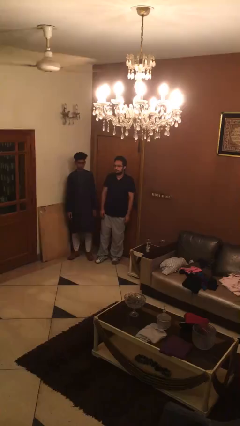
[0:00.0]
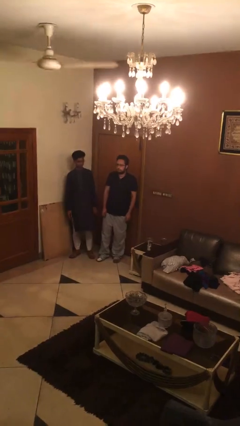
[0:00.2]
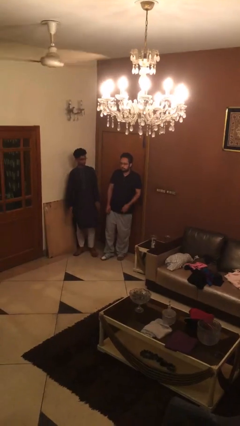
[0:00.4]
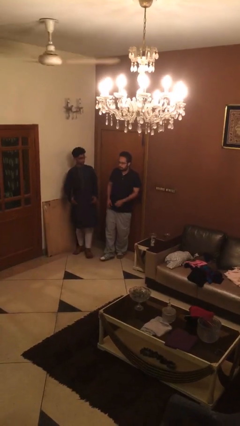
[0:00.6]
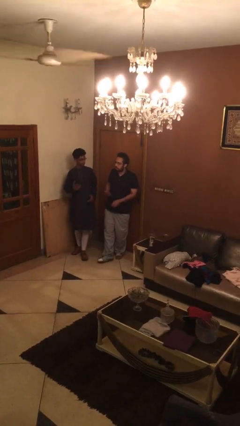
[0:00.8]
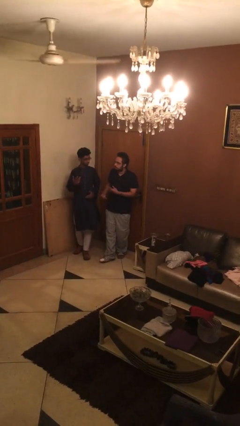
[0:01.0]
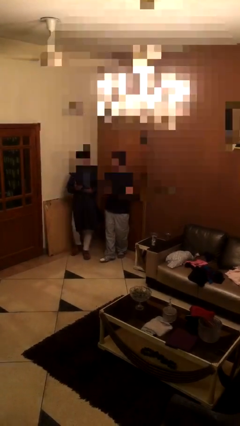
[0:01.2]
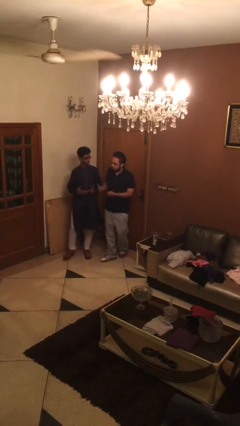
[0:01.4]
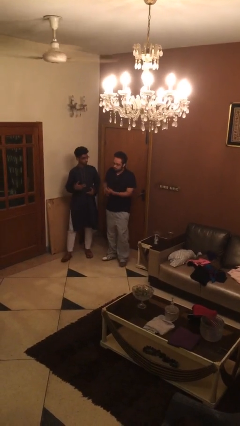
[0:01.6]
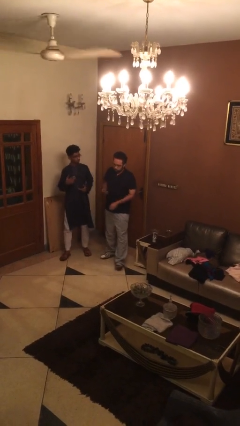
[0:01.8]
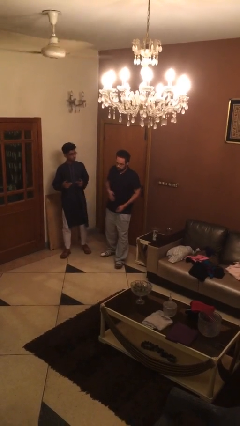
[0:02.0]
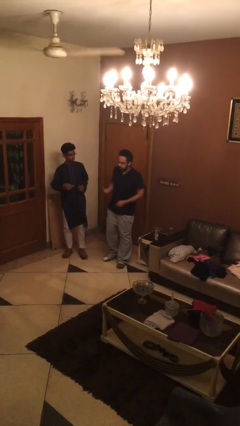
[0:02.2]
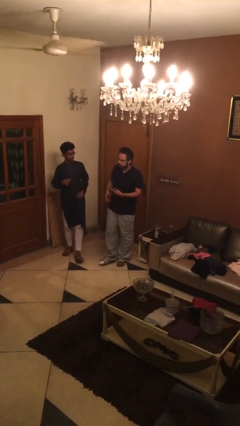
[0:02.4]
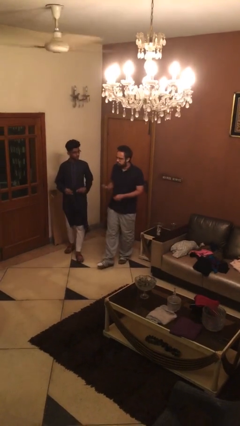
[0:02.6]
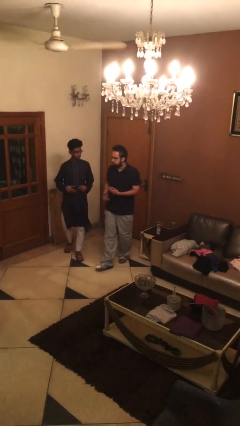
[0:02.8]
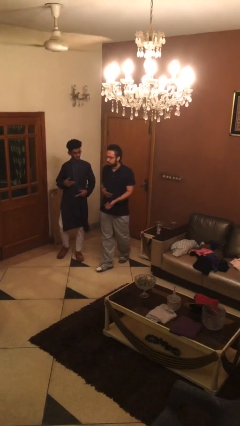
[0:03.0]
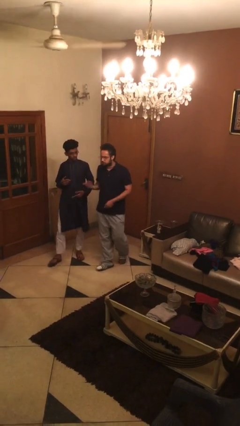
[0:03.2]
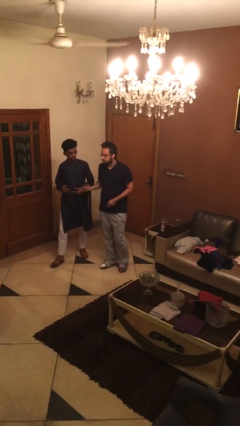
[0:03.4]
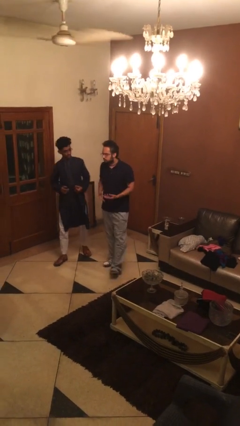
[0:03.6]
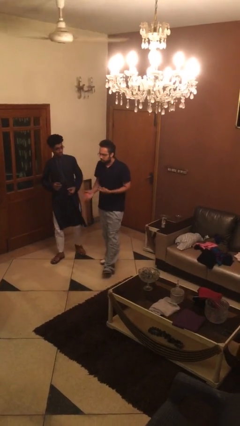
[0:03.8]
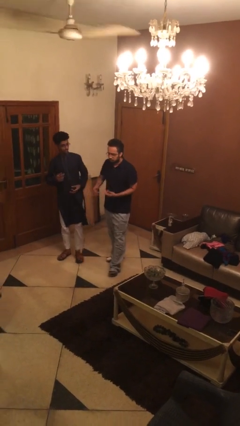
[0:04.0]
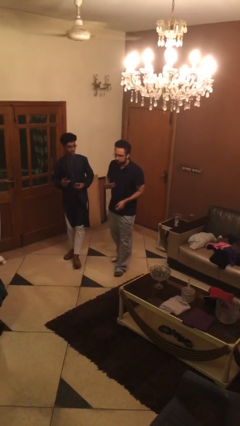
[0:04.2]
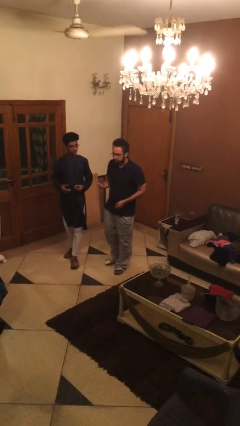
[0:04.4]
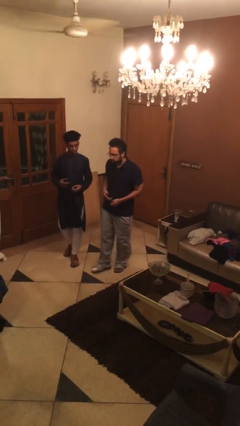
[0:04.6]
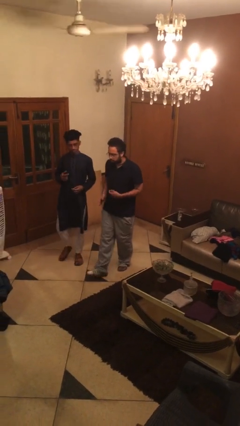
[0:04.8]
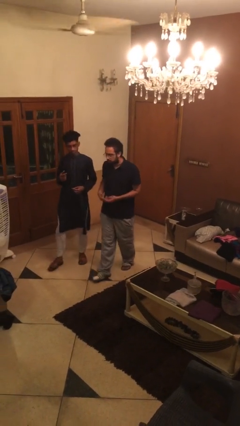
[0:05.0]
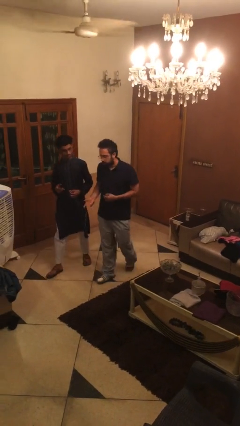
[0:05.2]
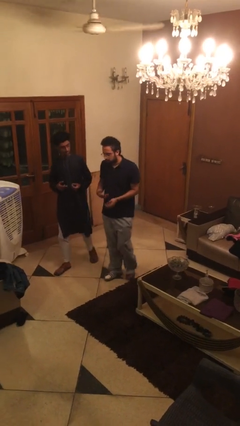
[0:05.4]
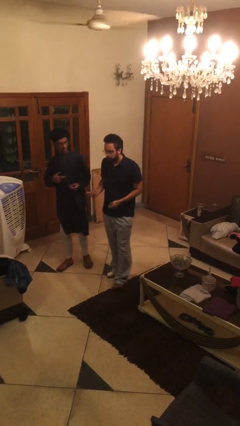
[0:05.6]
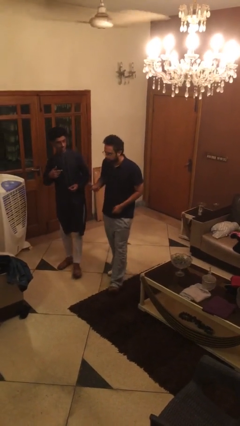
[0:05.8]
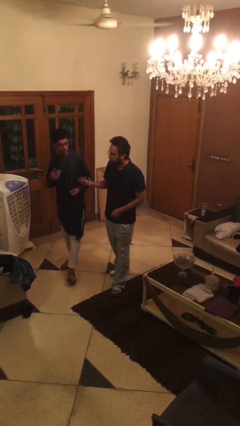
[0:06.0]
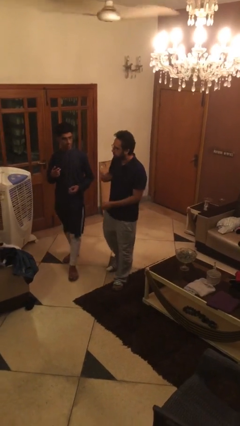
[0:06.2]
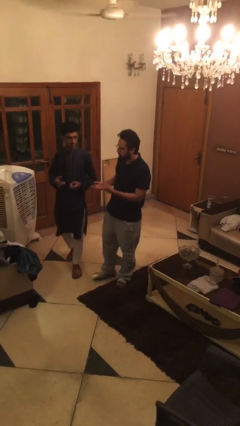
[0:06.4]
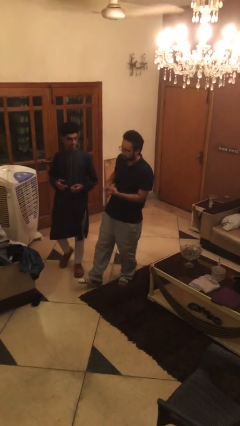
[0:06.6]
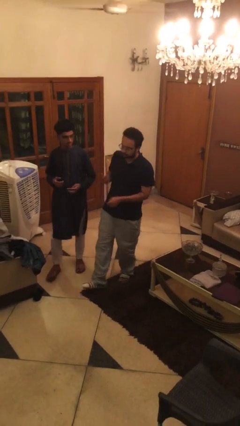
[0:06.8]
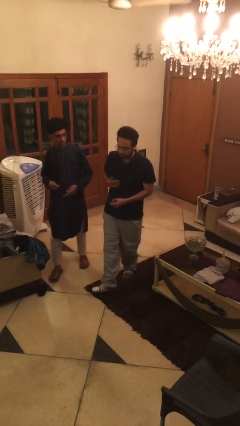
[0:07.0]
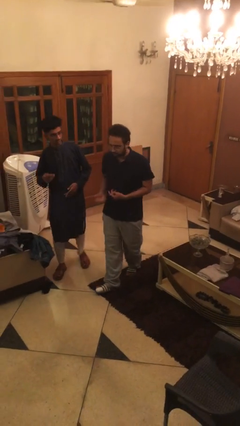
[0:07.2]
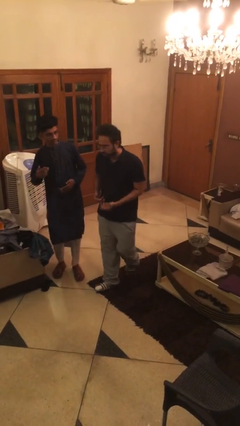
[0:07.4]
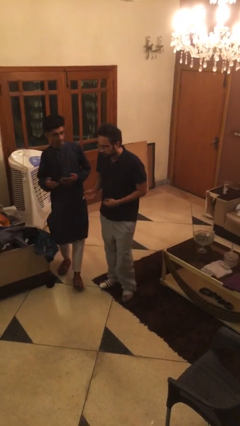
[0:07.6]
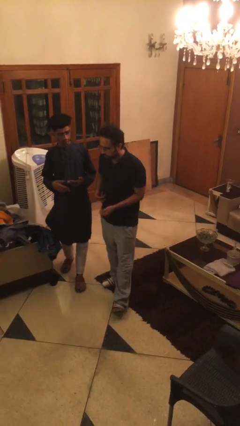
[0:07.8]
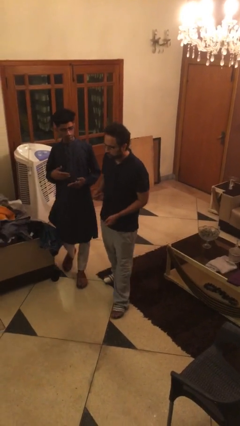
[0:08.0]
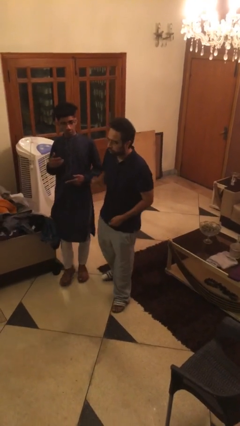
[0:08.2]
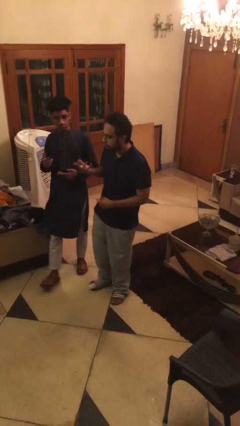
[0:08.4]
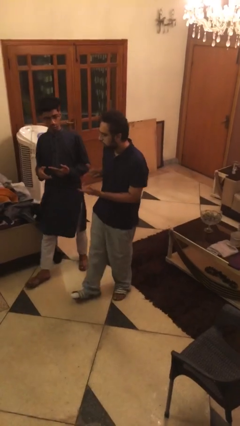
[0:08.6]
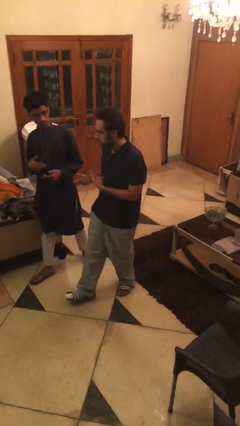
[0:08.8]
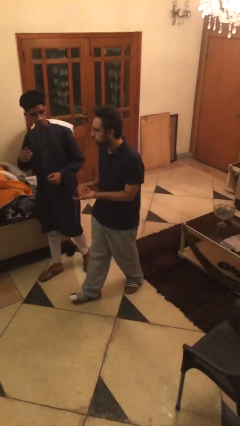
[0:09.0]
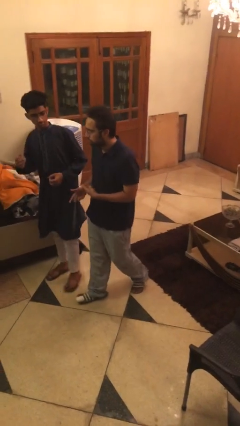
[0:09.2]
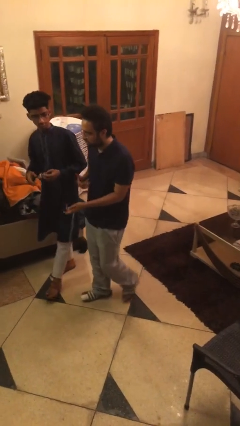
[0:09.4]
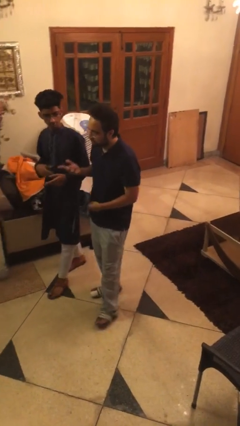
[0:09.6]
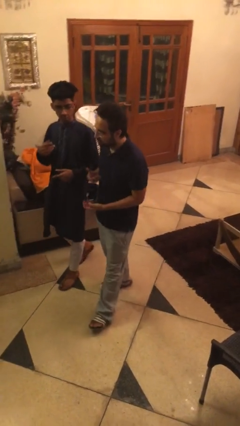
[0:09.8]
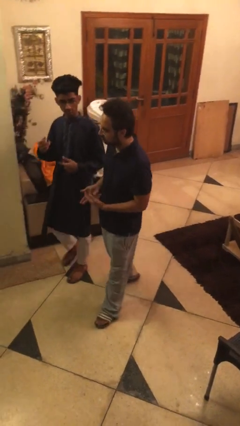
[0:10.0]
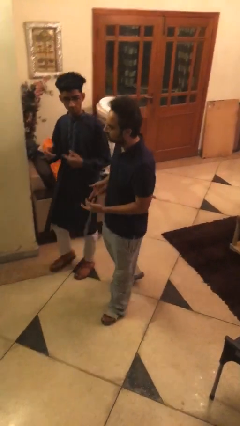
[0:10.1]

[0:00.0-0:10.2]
person talks to person

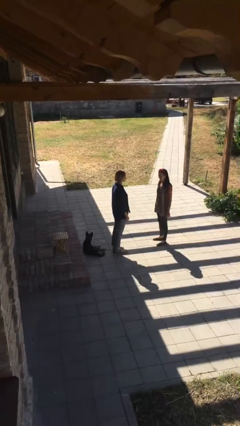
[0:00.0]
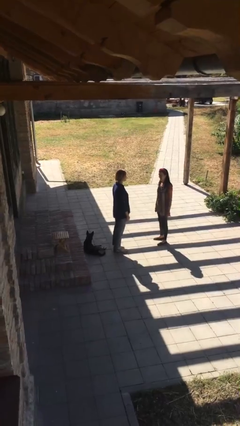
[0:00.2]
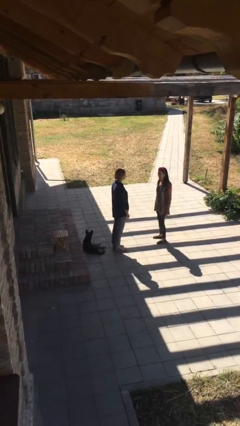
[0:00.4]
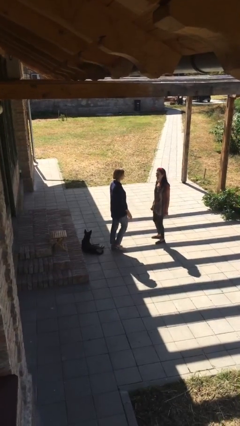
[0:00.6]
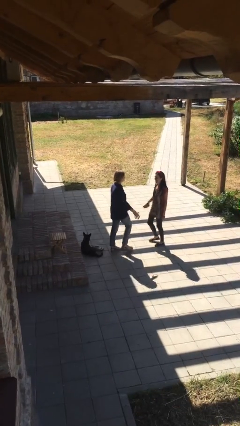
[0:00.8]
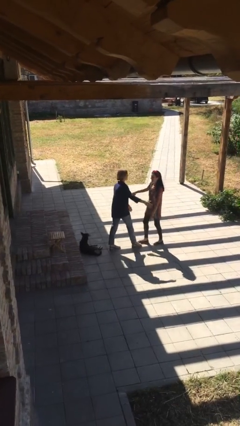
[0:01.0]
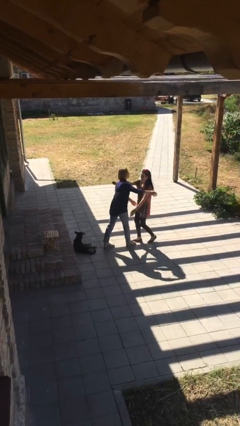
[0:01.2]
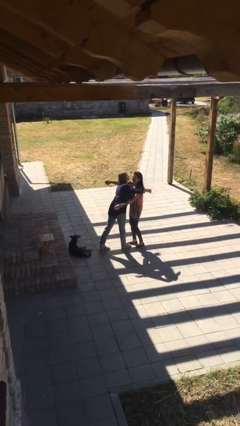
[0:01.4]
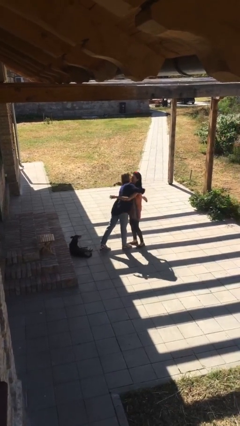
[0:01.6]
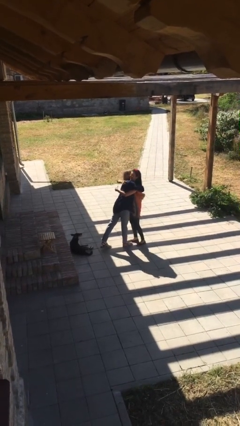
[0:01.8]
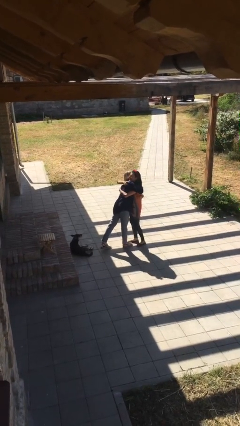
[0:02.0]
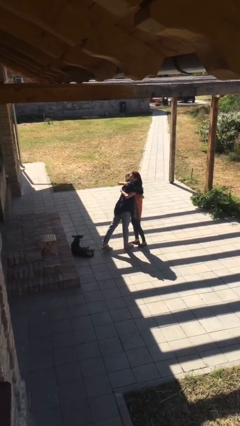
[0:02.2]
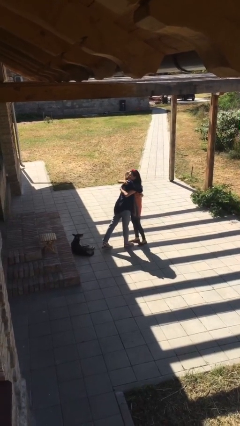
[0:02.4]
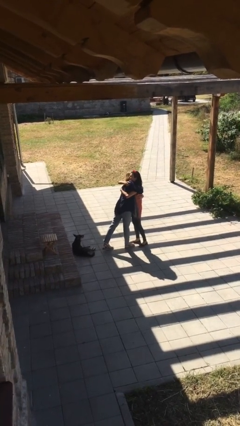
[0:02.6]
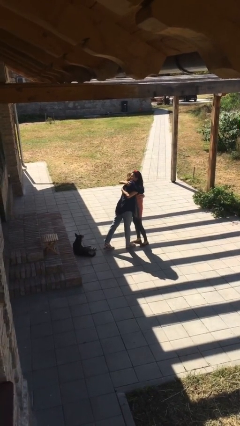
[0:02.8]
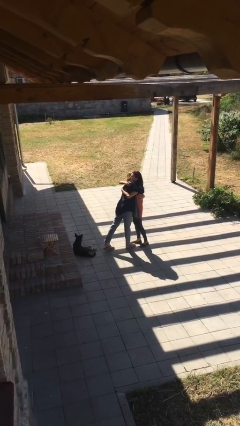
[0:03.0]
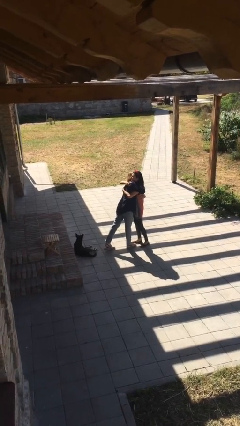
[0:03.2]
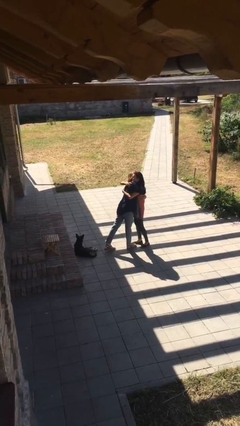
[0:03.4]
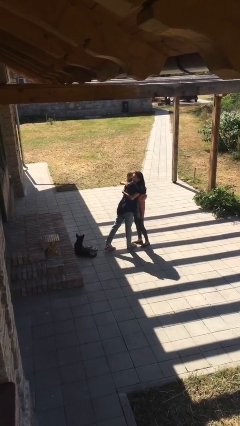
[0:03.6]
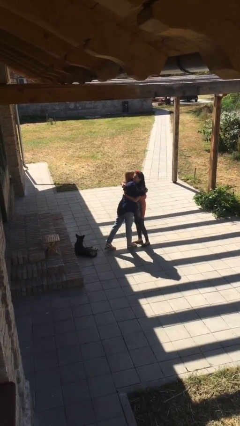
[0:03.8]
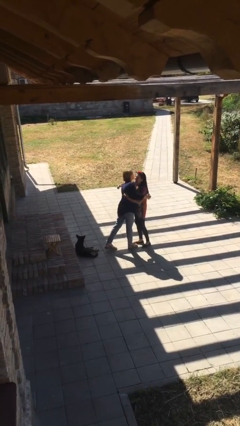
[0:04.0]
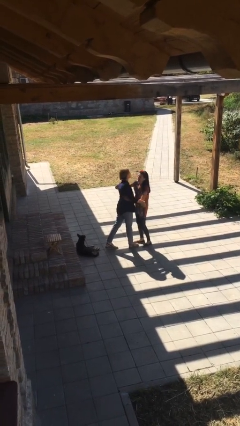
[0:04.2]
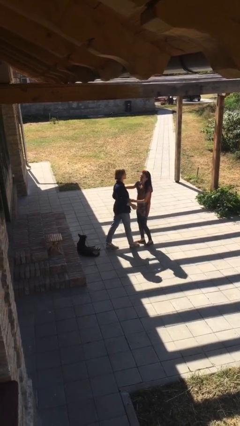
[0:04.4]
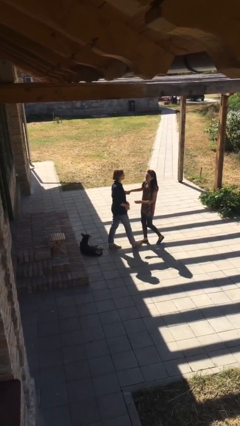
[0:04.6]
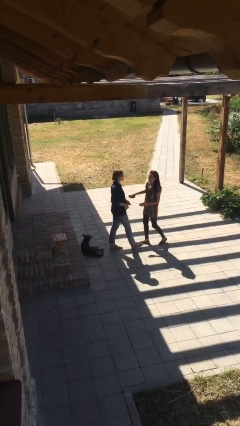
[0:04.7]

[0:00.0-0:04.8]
person embraces person

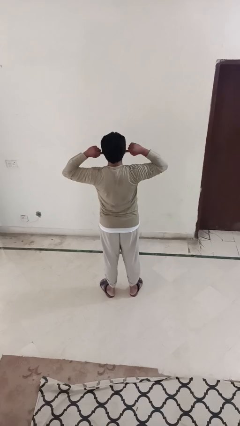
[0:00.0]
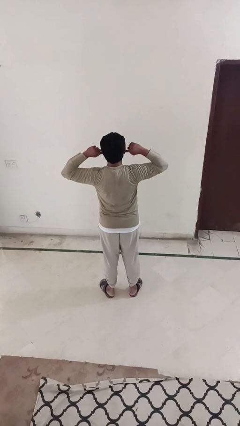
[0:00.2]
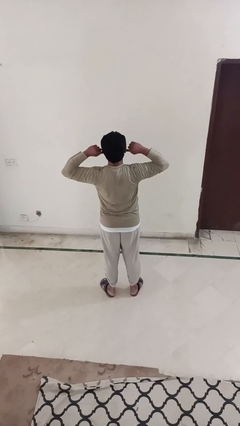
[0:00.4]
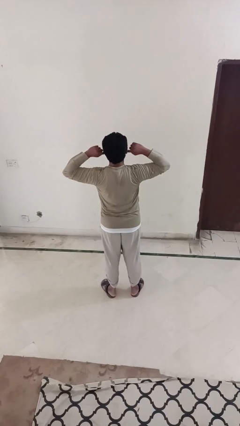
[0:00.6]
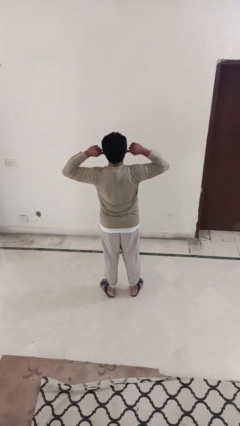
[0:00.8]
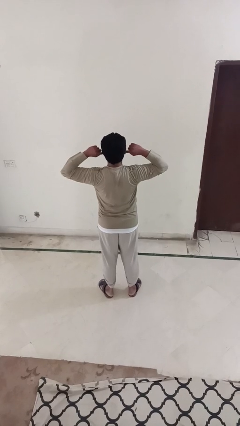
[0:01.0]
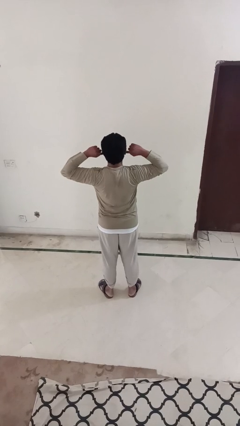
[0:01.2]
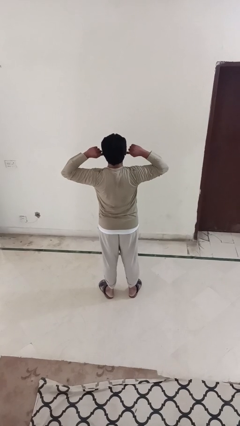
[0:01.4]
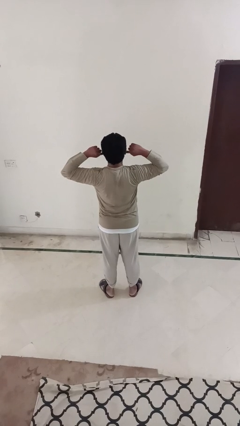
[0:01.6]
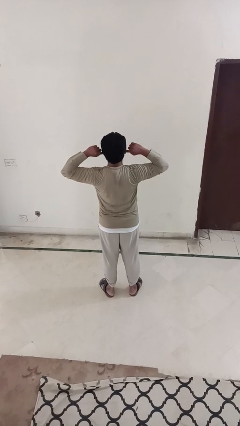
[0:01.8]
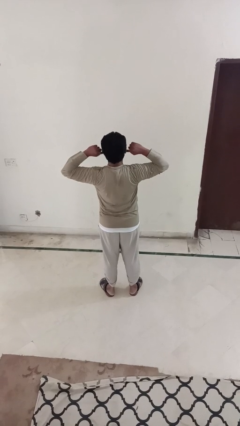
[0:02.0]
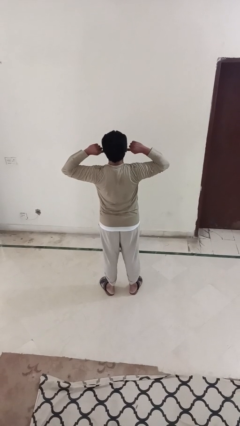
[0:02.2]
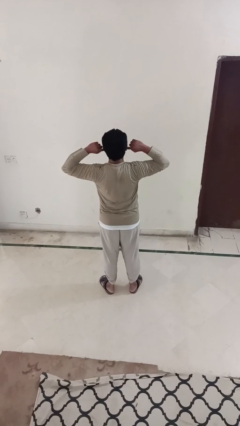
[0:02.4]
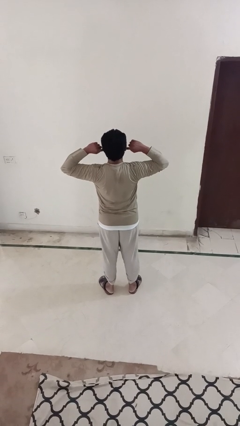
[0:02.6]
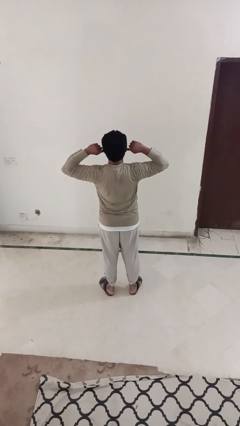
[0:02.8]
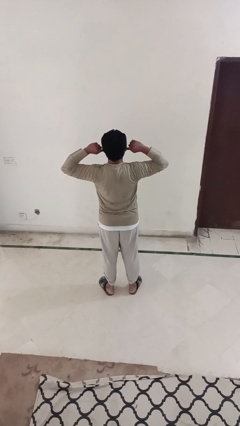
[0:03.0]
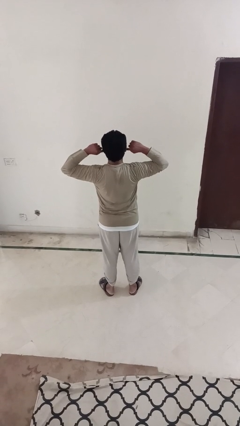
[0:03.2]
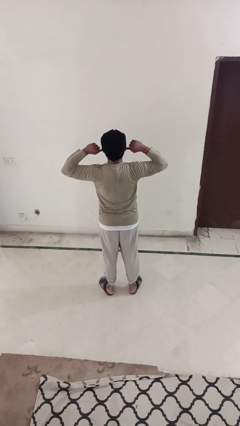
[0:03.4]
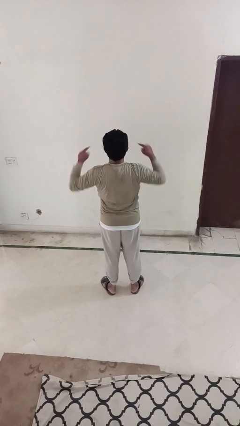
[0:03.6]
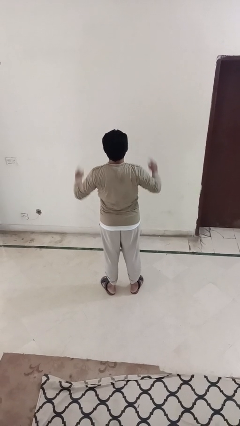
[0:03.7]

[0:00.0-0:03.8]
person puts fingers in ear
